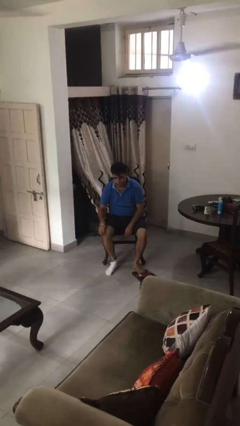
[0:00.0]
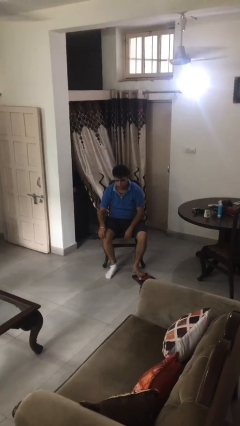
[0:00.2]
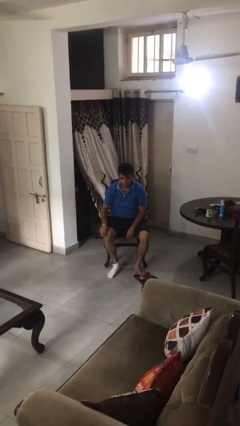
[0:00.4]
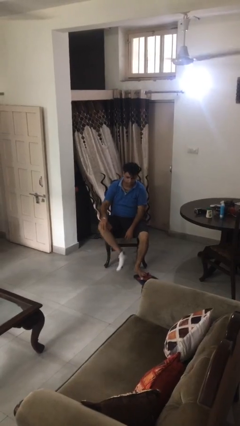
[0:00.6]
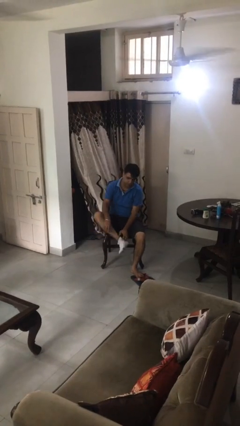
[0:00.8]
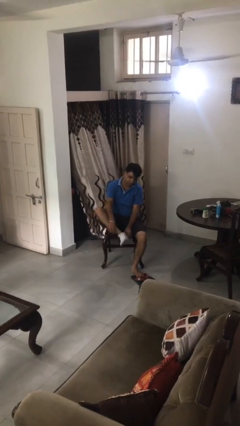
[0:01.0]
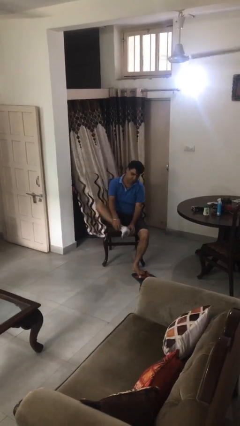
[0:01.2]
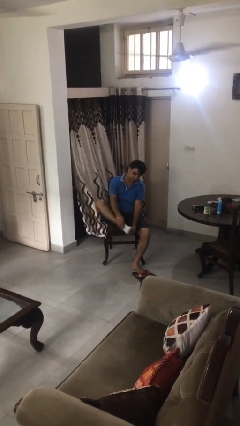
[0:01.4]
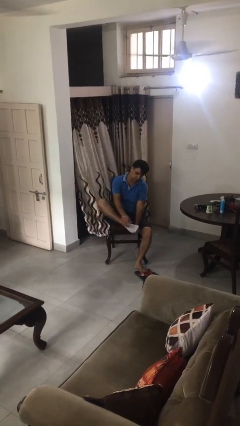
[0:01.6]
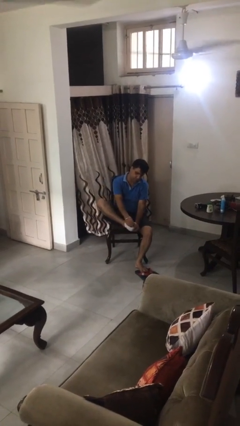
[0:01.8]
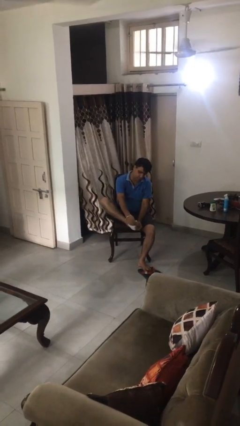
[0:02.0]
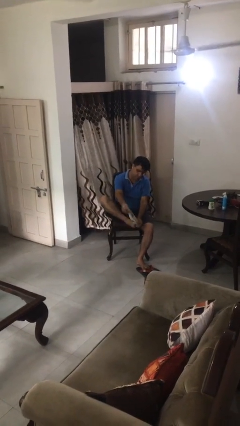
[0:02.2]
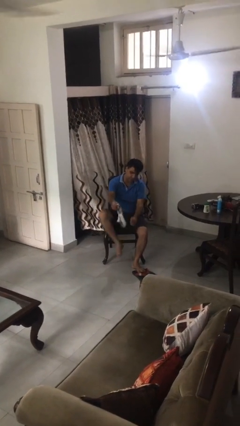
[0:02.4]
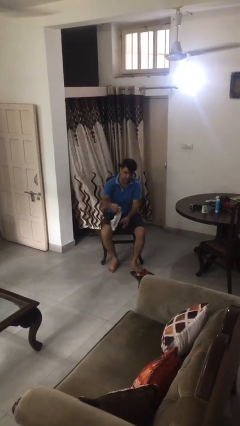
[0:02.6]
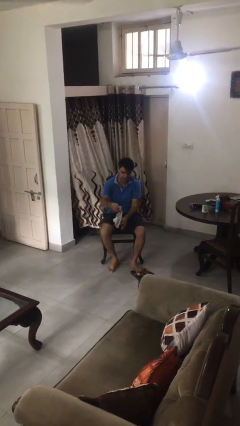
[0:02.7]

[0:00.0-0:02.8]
person takes off socks

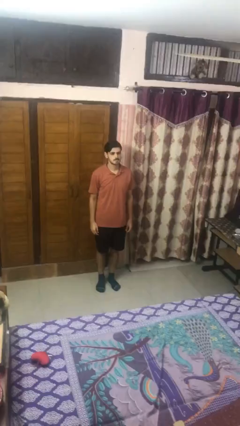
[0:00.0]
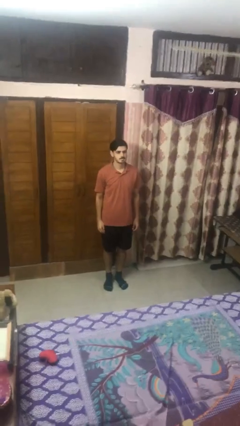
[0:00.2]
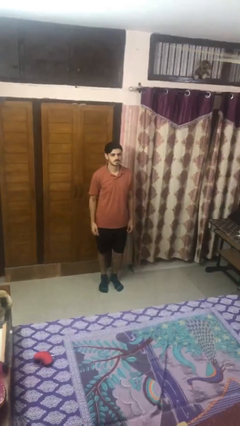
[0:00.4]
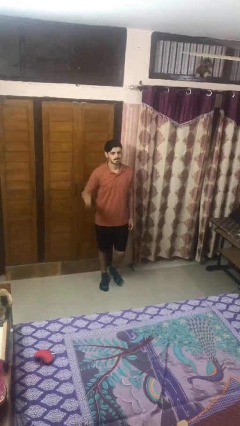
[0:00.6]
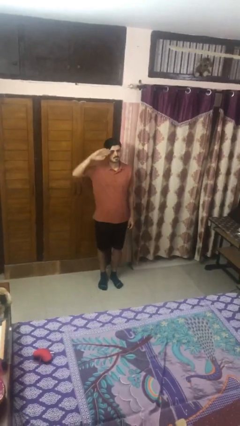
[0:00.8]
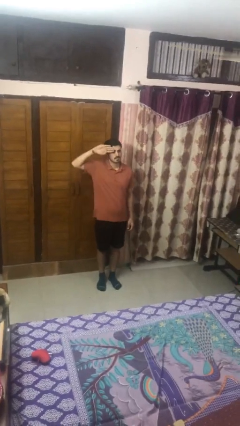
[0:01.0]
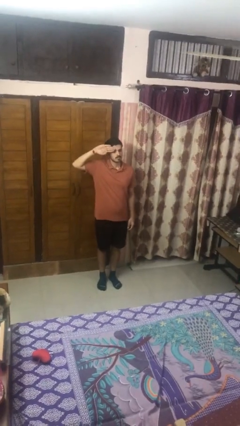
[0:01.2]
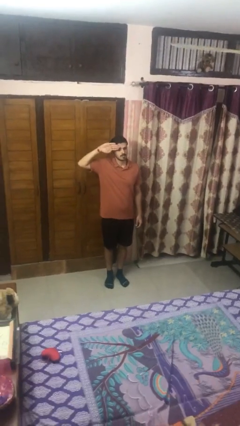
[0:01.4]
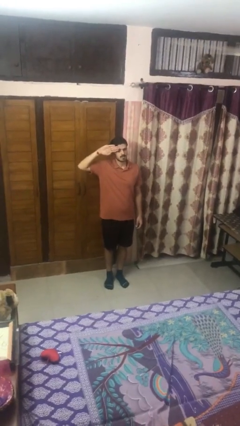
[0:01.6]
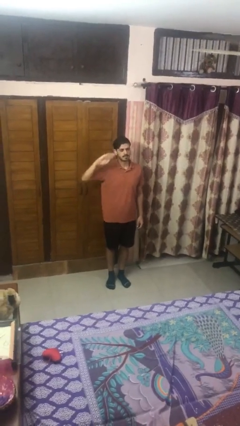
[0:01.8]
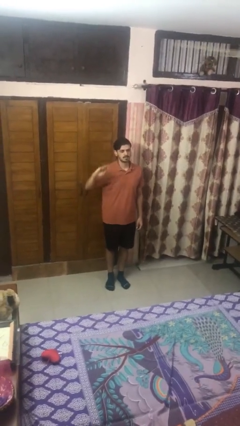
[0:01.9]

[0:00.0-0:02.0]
person salutes

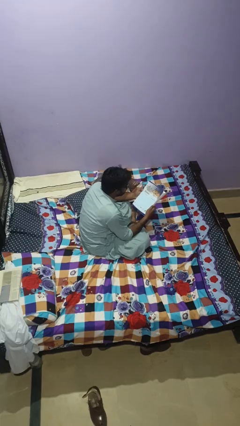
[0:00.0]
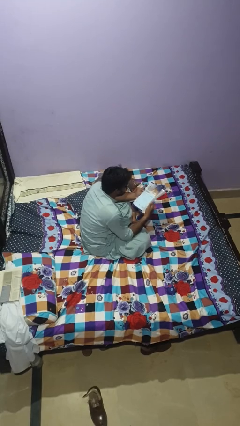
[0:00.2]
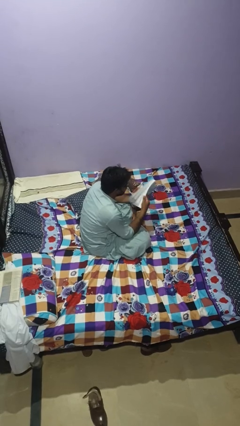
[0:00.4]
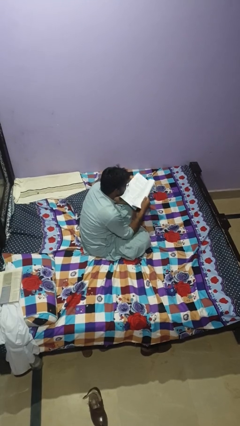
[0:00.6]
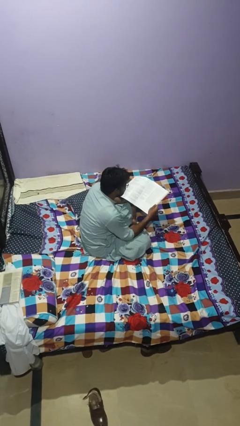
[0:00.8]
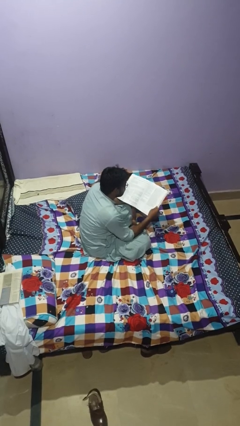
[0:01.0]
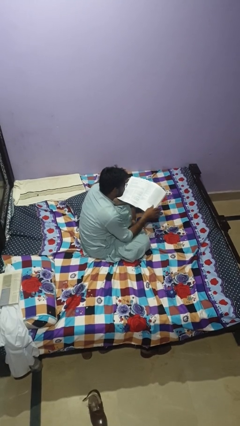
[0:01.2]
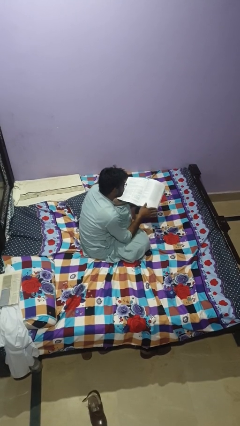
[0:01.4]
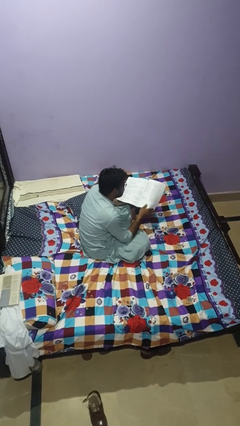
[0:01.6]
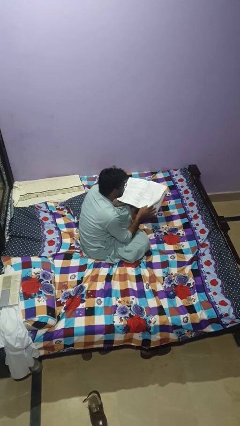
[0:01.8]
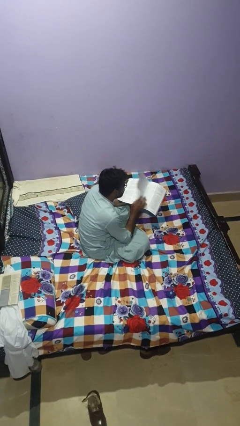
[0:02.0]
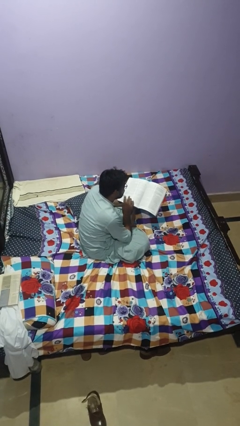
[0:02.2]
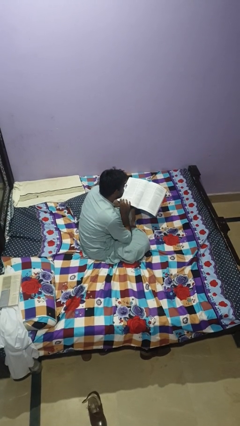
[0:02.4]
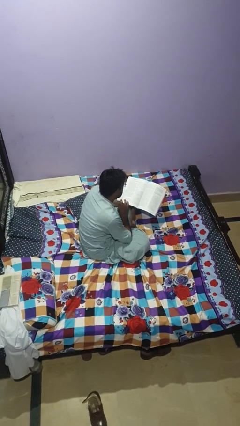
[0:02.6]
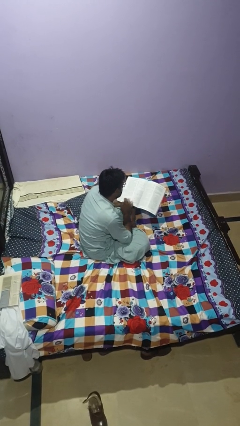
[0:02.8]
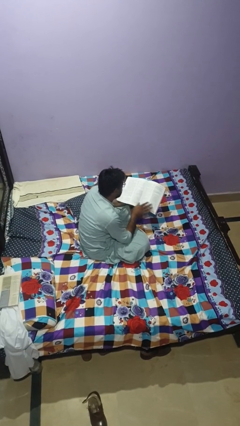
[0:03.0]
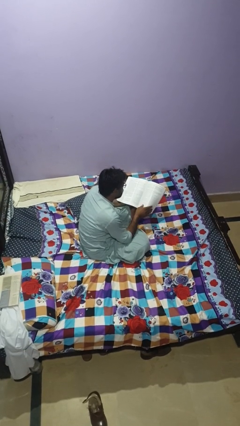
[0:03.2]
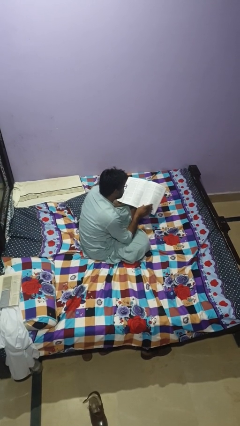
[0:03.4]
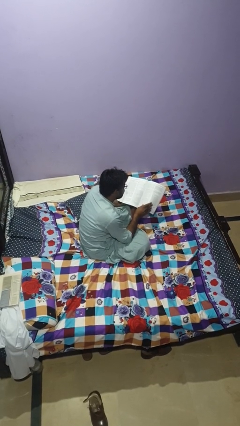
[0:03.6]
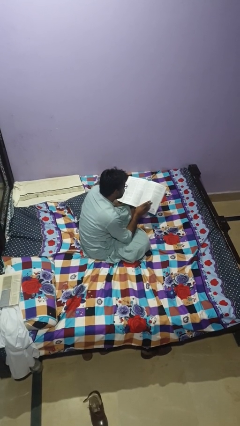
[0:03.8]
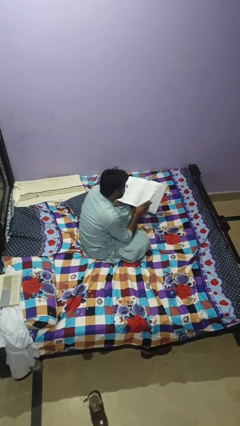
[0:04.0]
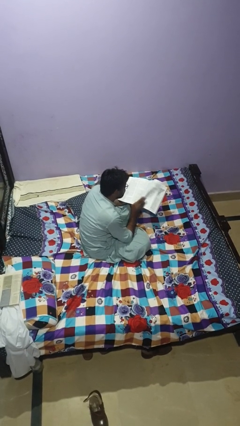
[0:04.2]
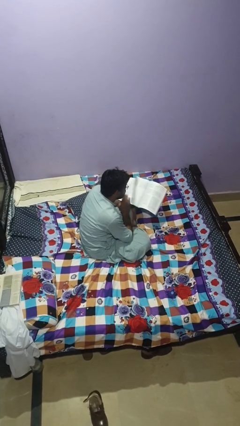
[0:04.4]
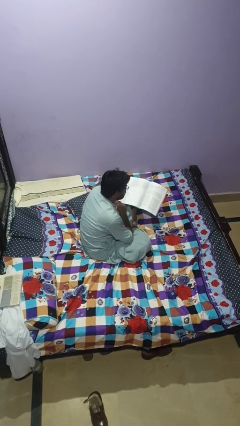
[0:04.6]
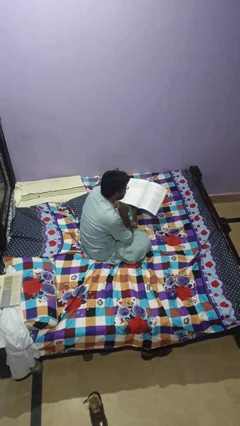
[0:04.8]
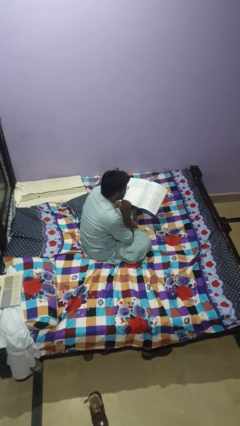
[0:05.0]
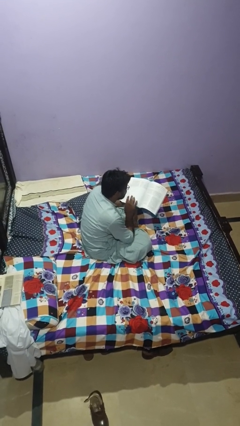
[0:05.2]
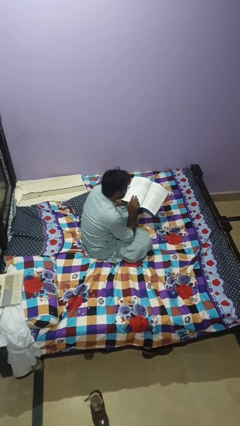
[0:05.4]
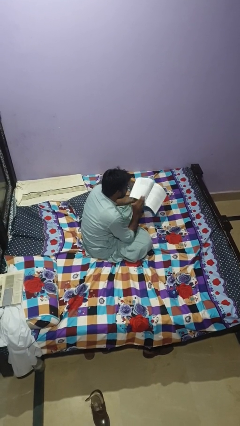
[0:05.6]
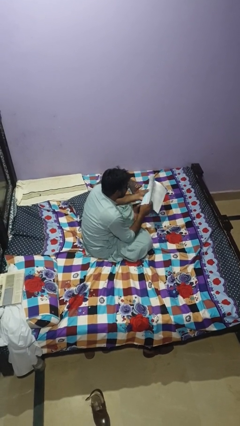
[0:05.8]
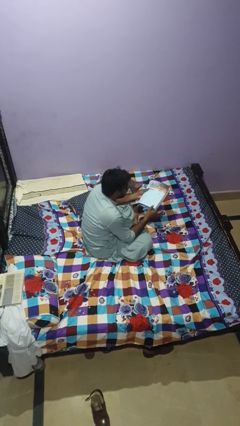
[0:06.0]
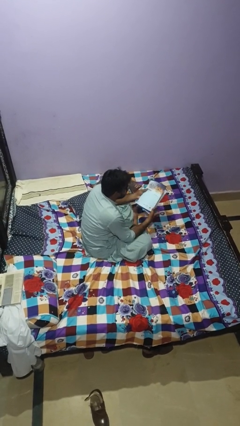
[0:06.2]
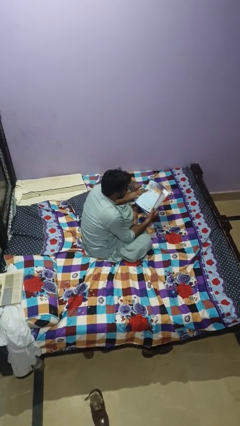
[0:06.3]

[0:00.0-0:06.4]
person reads magazine

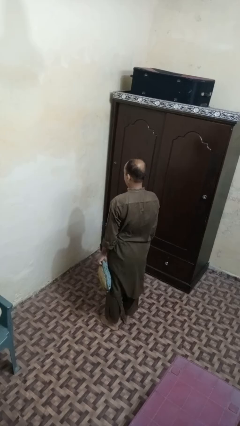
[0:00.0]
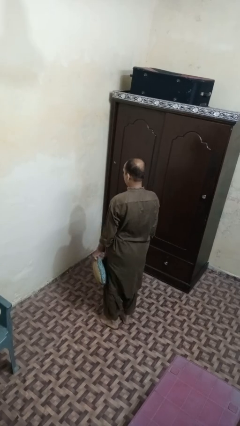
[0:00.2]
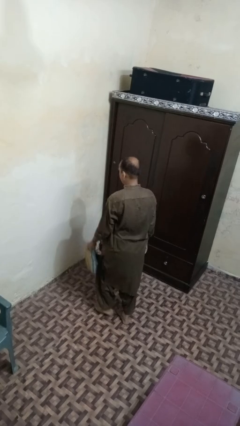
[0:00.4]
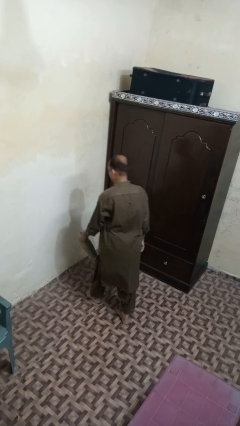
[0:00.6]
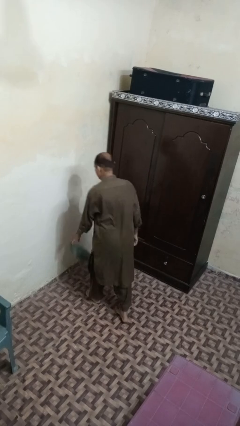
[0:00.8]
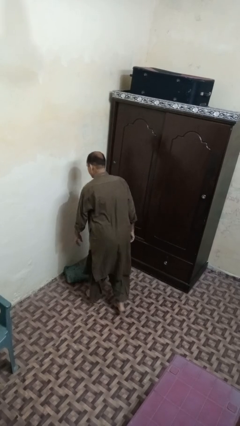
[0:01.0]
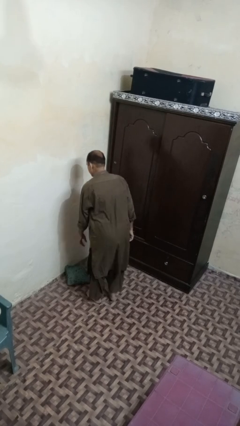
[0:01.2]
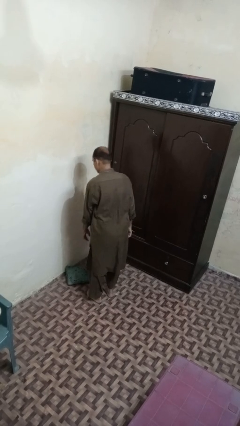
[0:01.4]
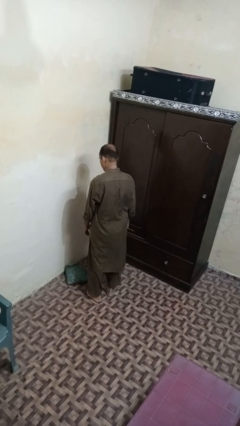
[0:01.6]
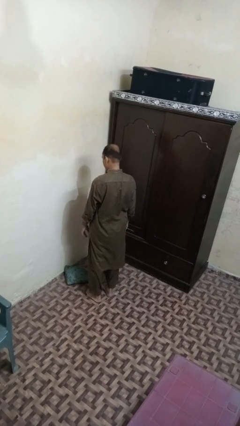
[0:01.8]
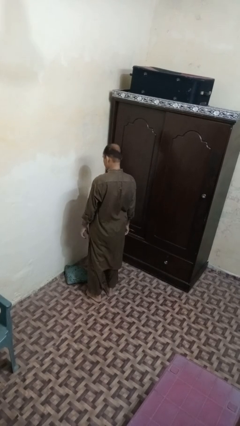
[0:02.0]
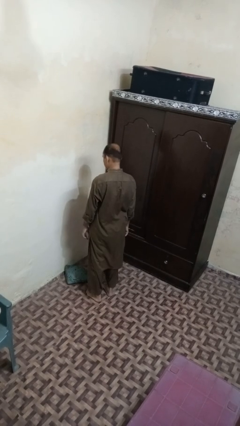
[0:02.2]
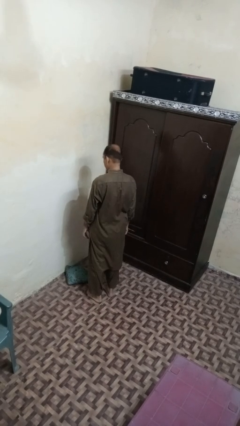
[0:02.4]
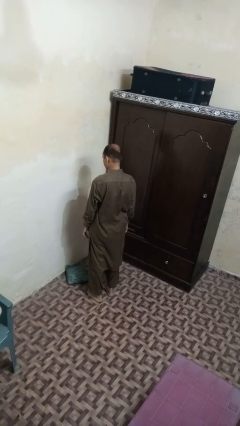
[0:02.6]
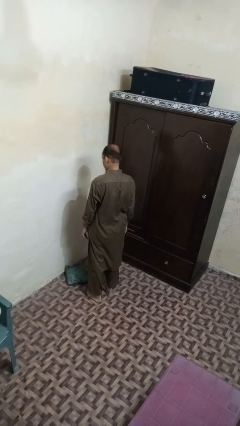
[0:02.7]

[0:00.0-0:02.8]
person throws object to ground

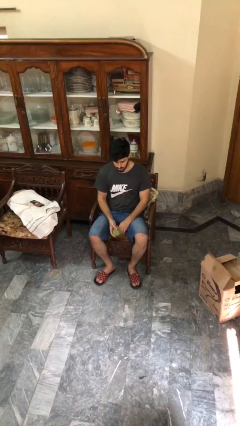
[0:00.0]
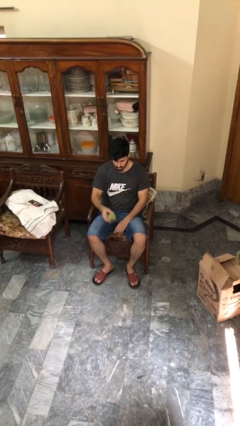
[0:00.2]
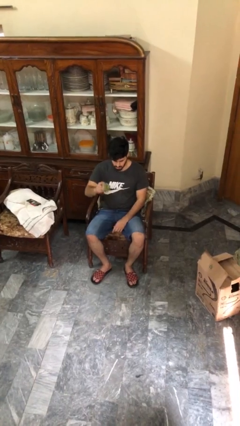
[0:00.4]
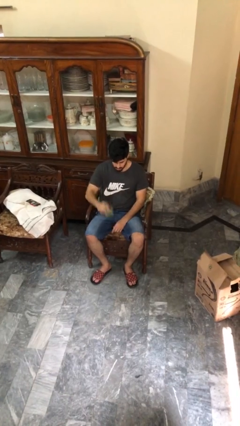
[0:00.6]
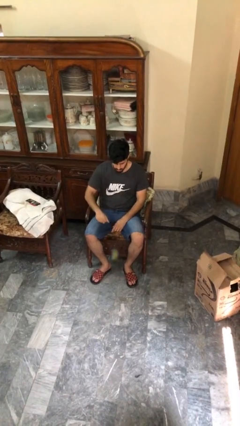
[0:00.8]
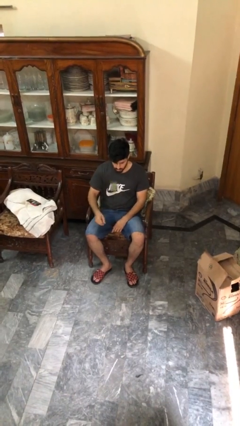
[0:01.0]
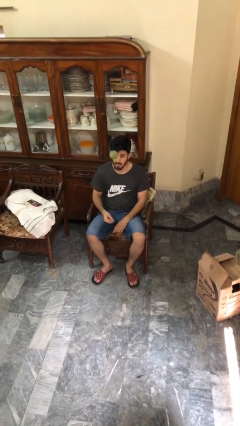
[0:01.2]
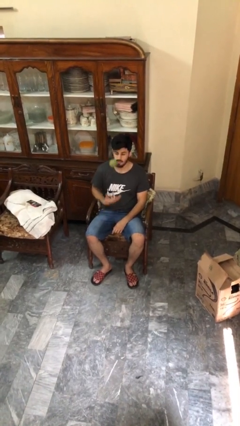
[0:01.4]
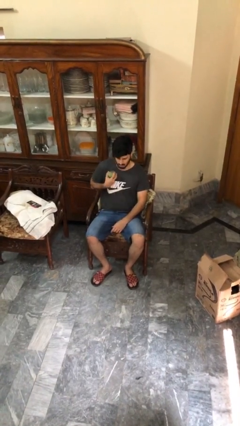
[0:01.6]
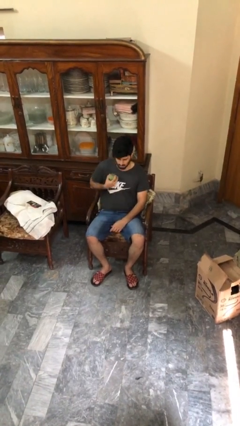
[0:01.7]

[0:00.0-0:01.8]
person bounces ball on floor

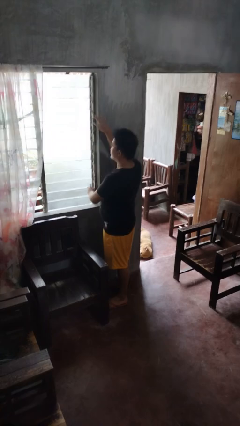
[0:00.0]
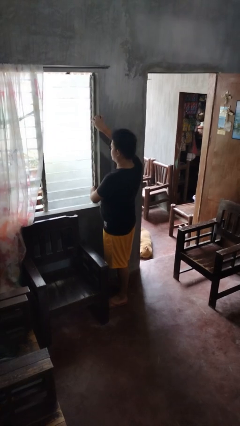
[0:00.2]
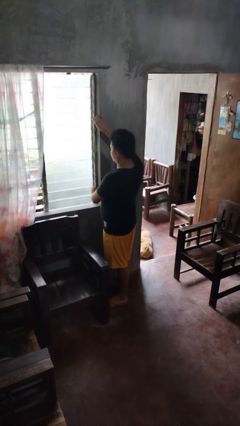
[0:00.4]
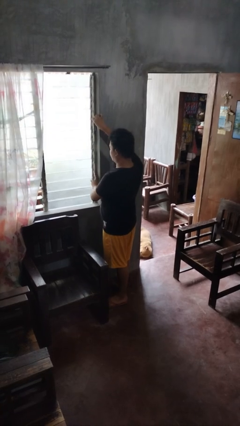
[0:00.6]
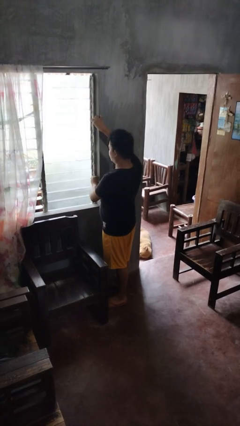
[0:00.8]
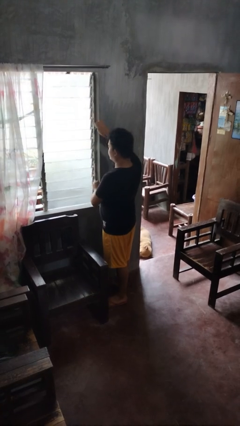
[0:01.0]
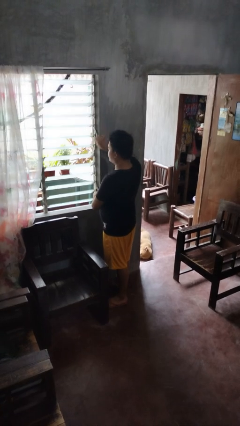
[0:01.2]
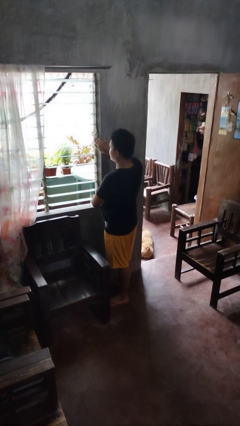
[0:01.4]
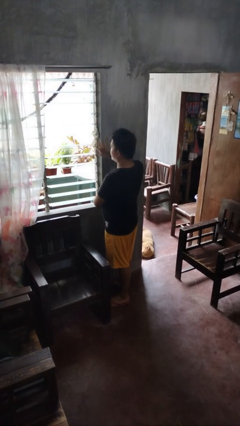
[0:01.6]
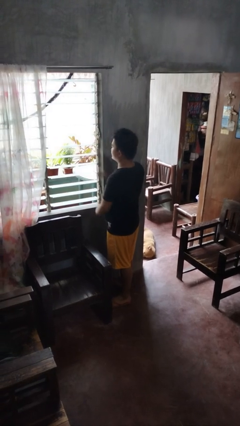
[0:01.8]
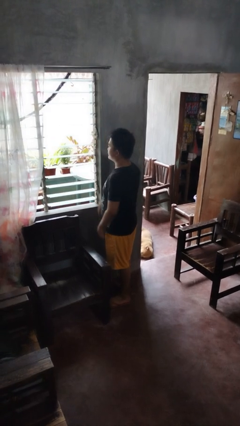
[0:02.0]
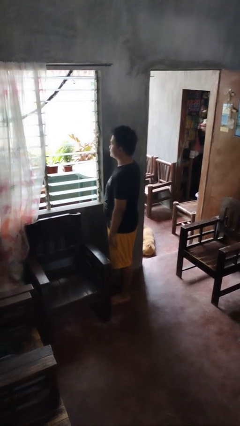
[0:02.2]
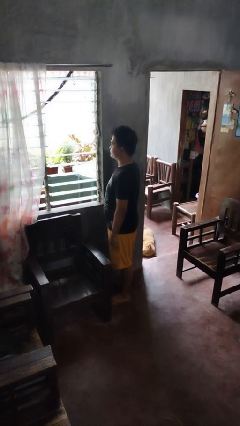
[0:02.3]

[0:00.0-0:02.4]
person opens home window
